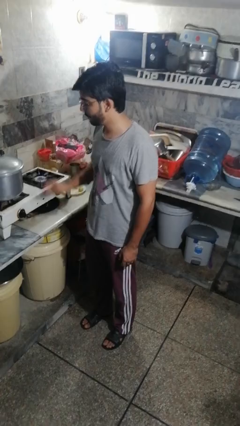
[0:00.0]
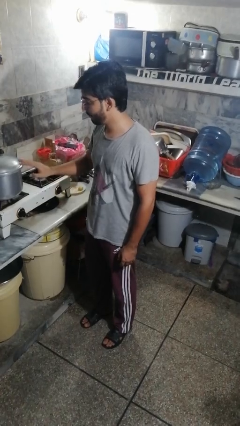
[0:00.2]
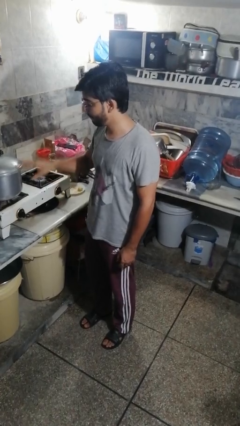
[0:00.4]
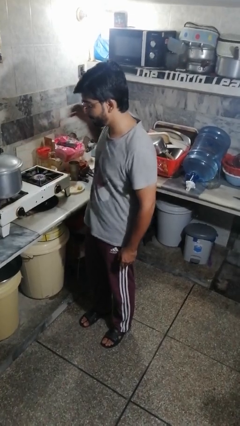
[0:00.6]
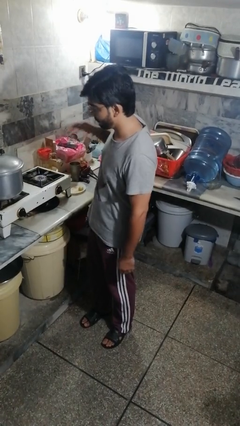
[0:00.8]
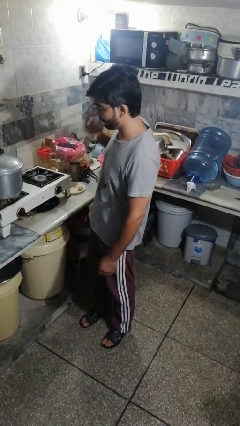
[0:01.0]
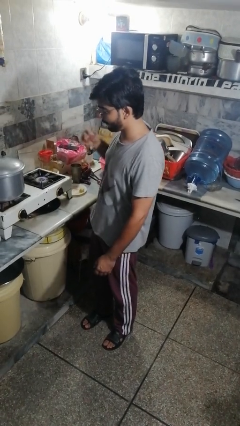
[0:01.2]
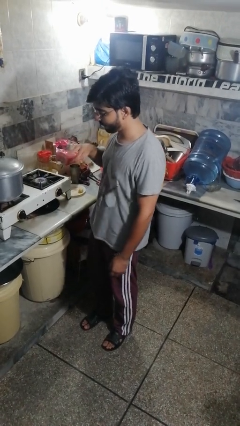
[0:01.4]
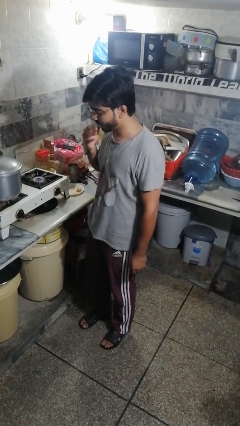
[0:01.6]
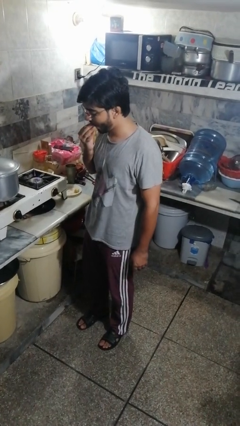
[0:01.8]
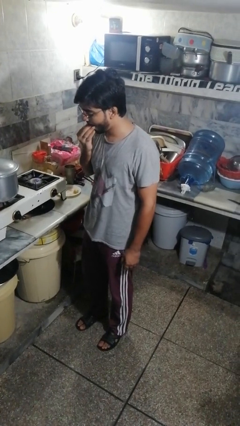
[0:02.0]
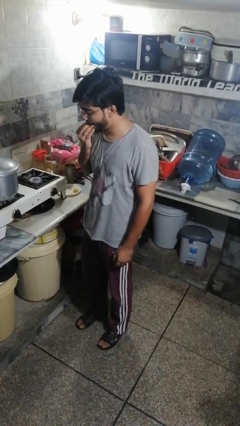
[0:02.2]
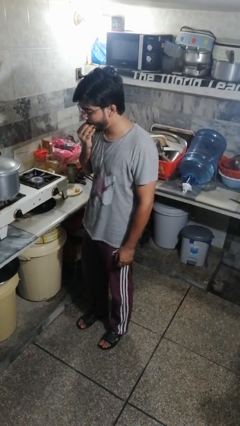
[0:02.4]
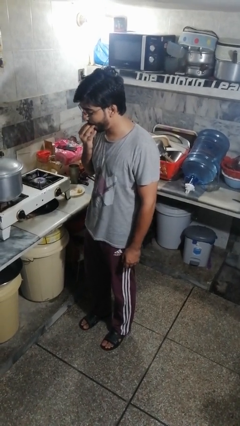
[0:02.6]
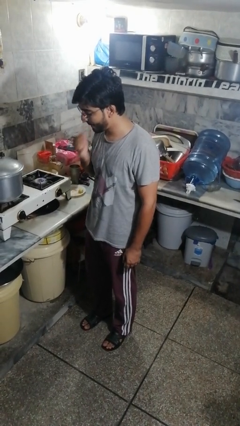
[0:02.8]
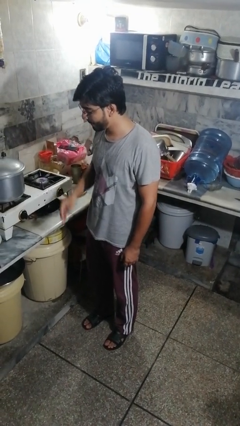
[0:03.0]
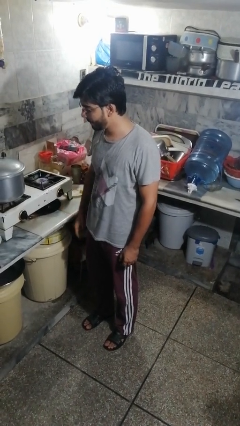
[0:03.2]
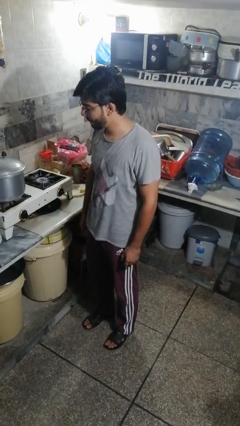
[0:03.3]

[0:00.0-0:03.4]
person burns hand

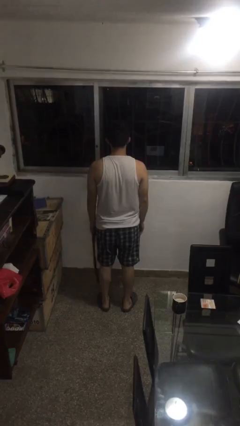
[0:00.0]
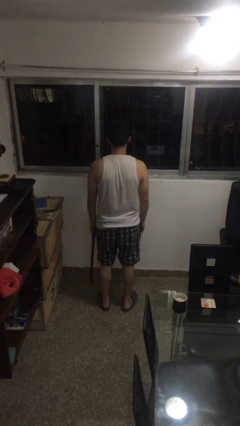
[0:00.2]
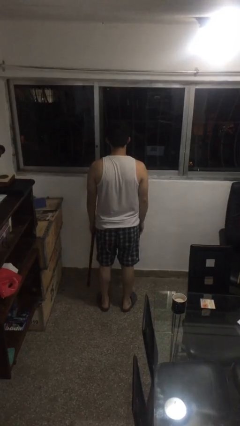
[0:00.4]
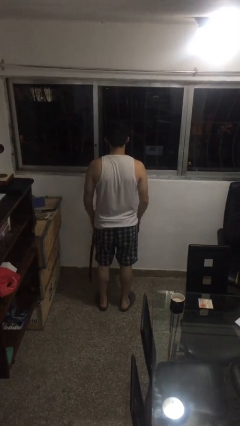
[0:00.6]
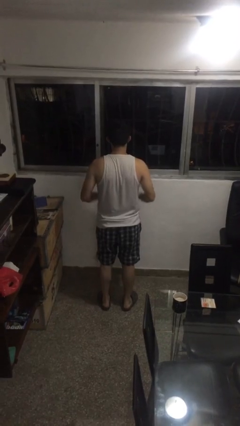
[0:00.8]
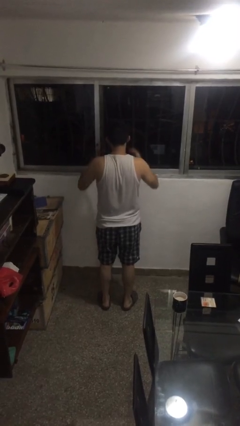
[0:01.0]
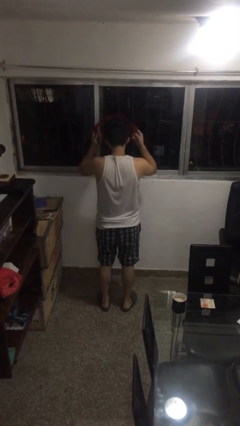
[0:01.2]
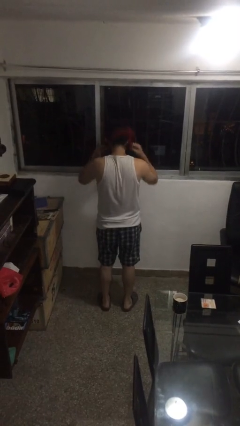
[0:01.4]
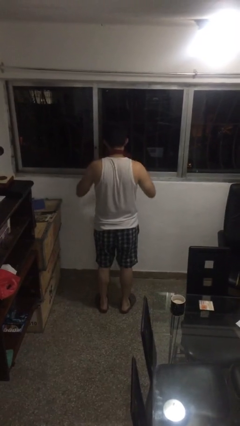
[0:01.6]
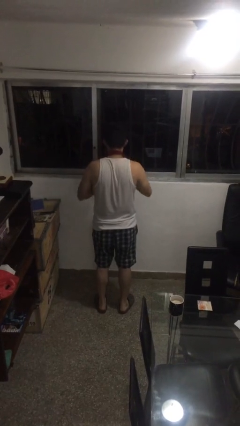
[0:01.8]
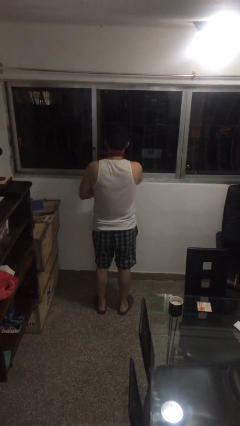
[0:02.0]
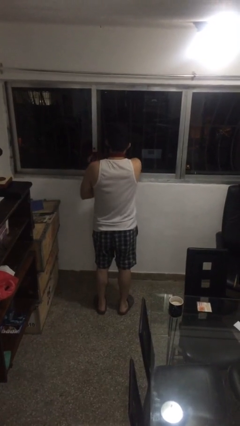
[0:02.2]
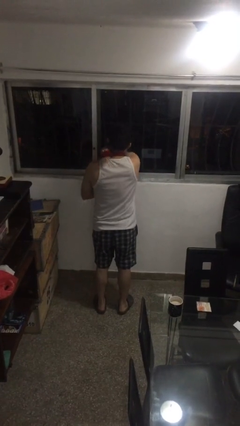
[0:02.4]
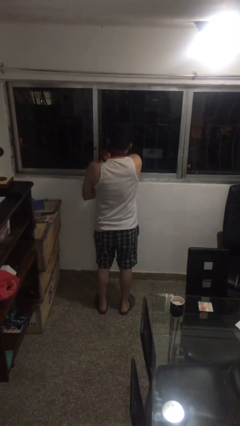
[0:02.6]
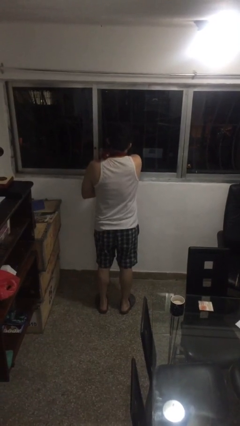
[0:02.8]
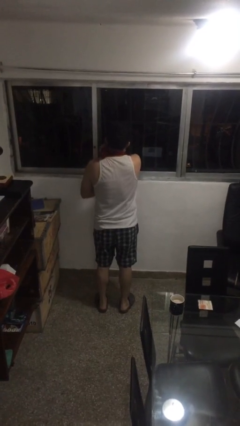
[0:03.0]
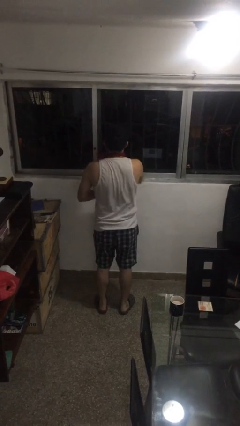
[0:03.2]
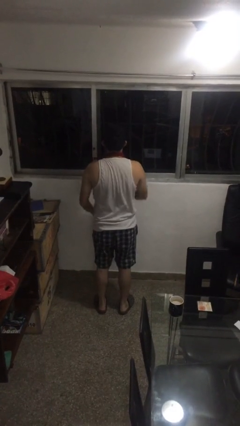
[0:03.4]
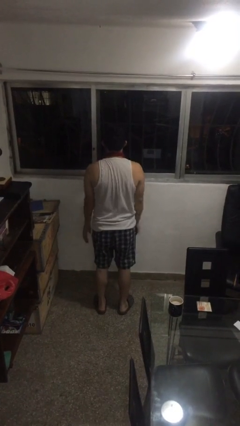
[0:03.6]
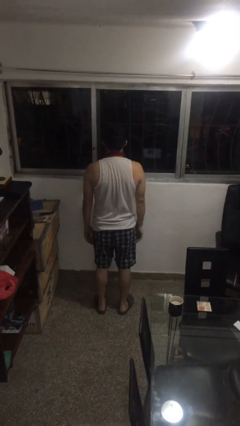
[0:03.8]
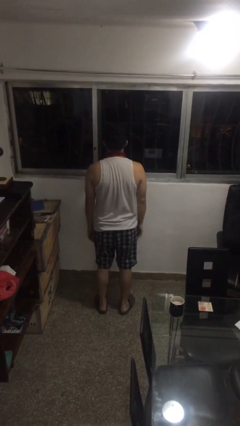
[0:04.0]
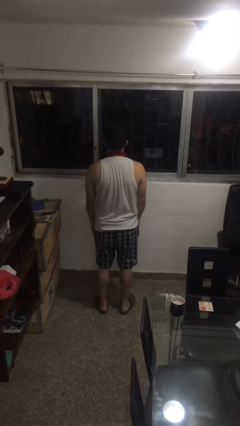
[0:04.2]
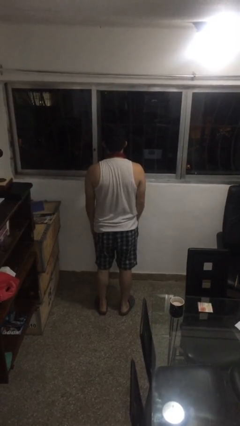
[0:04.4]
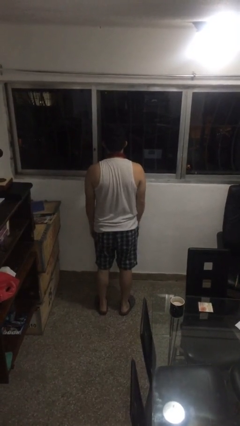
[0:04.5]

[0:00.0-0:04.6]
person puts on scarf

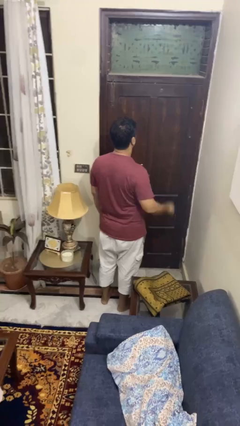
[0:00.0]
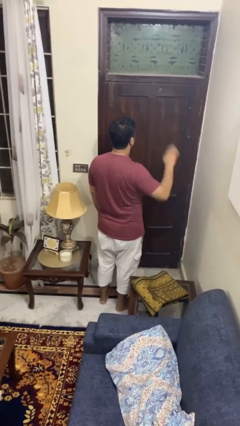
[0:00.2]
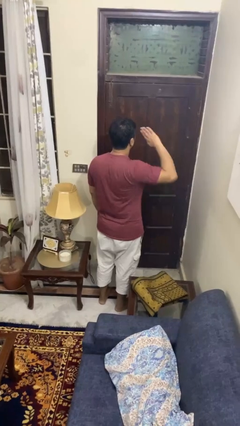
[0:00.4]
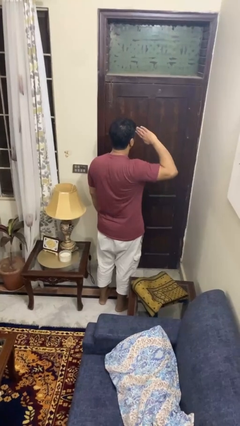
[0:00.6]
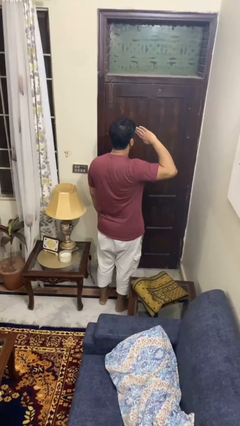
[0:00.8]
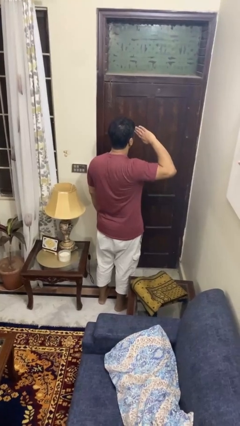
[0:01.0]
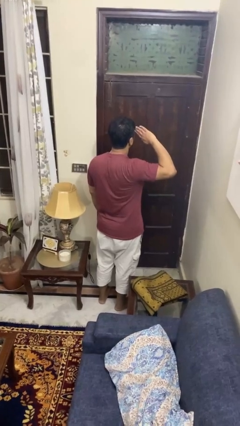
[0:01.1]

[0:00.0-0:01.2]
person salutes

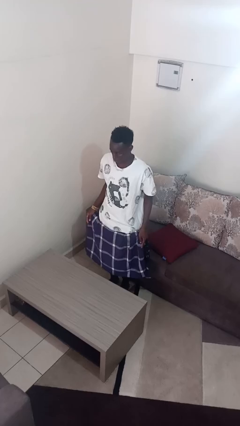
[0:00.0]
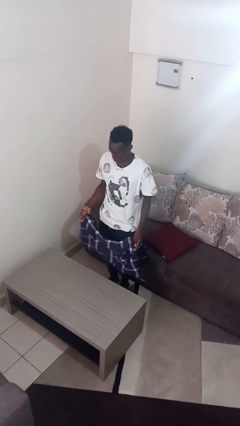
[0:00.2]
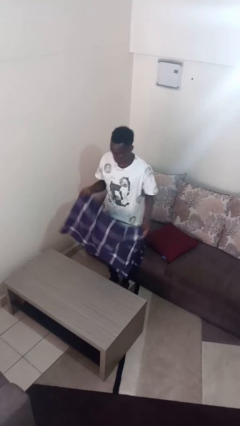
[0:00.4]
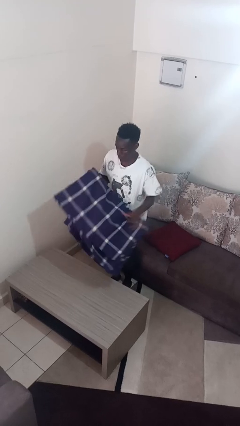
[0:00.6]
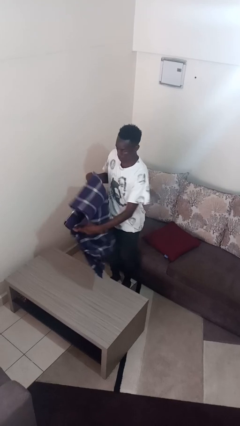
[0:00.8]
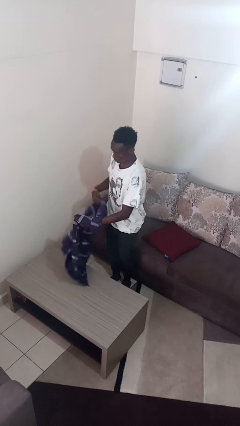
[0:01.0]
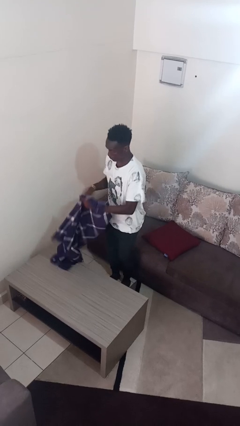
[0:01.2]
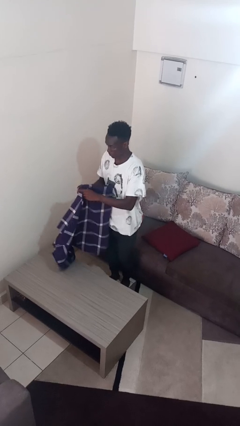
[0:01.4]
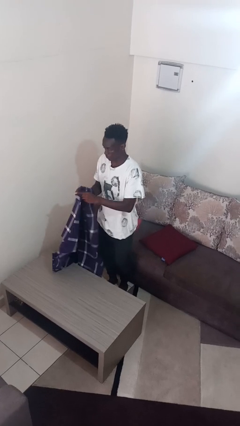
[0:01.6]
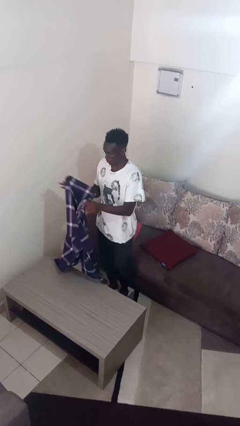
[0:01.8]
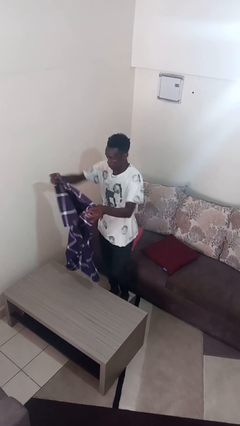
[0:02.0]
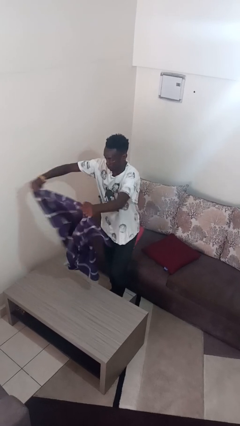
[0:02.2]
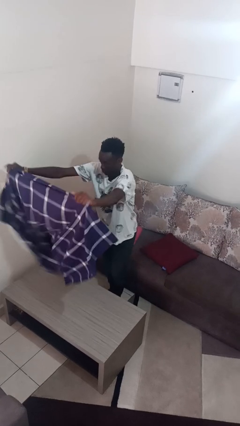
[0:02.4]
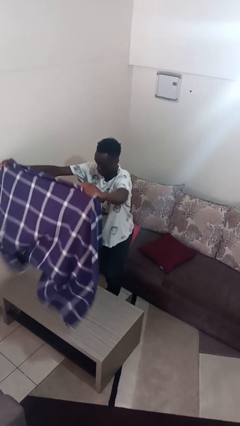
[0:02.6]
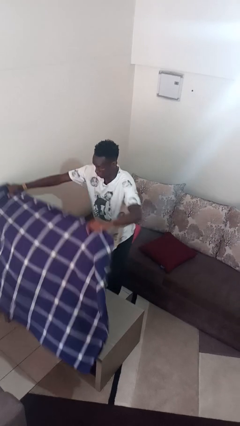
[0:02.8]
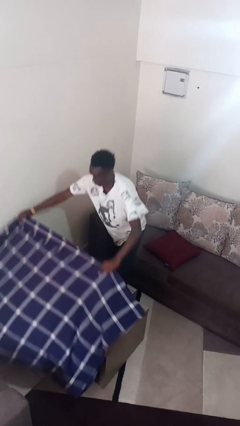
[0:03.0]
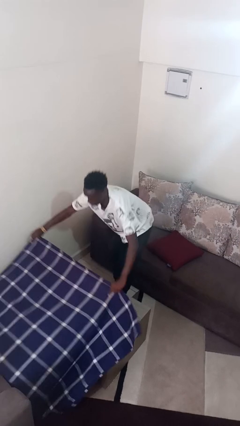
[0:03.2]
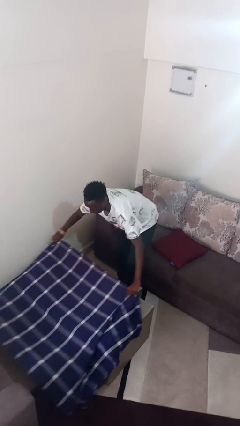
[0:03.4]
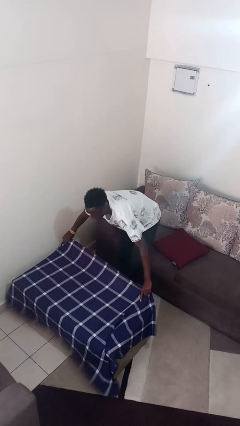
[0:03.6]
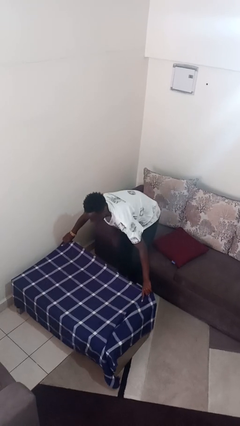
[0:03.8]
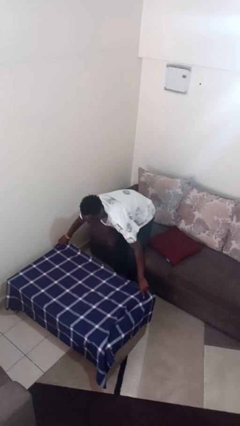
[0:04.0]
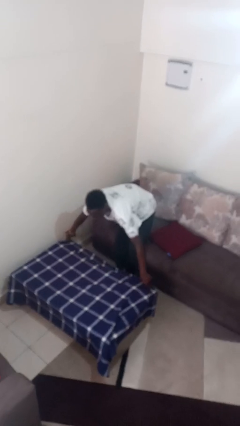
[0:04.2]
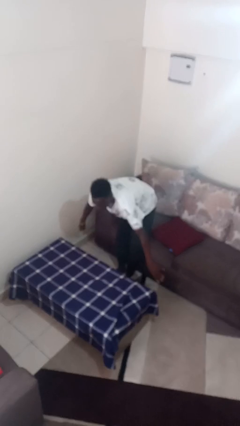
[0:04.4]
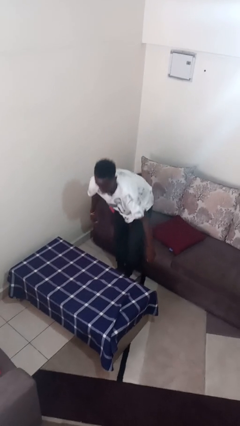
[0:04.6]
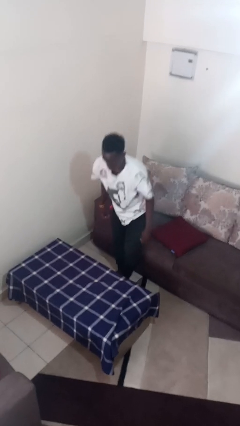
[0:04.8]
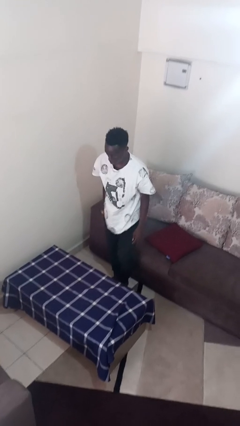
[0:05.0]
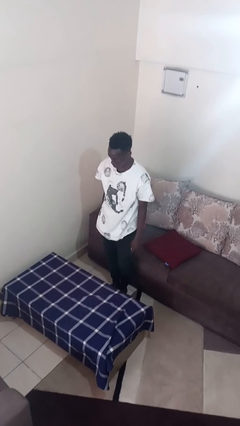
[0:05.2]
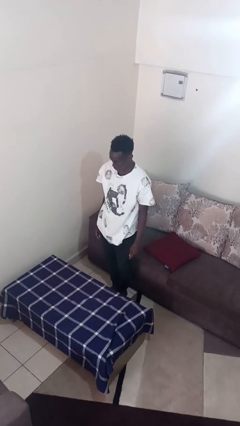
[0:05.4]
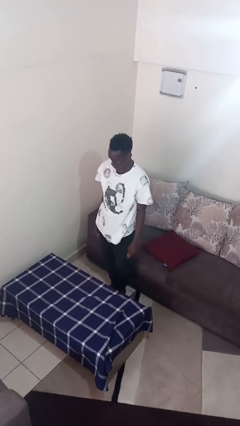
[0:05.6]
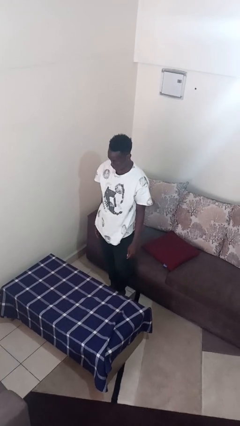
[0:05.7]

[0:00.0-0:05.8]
person spreads tablecloth

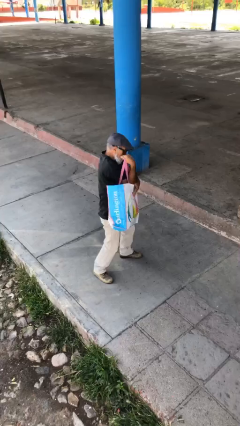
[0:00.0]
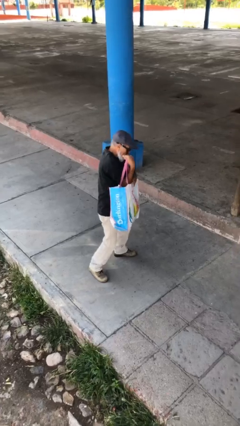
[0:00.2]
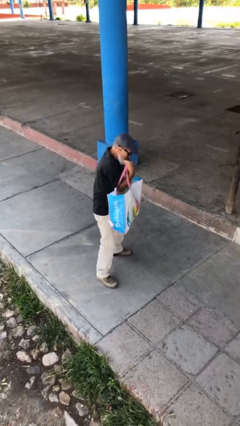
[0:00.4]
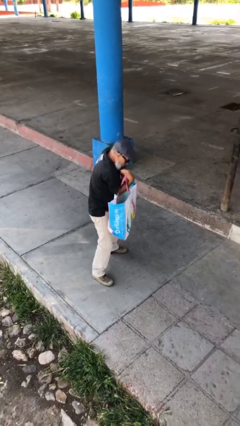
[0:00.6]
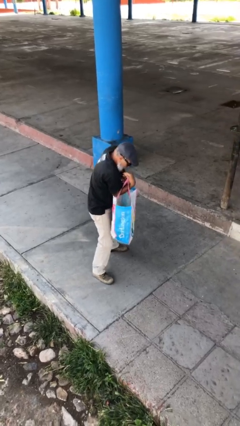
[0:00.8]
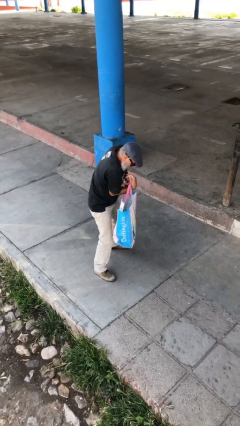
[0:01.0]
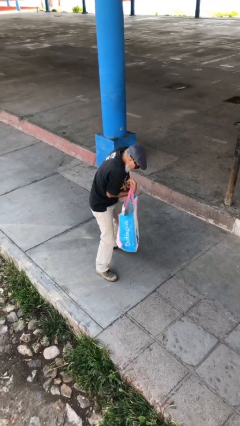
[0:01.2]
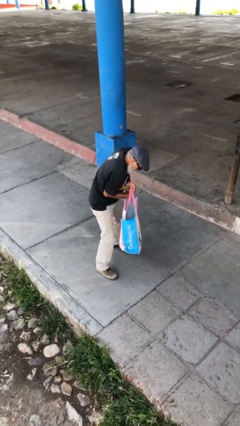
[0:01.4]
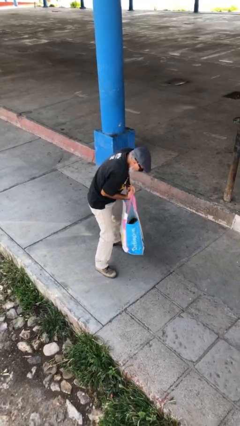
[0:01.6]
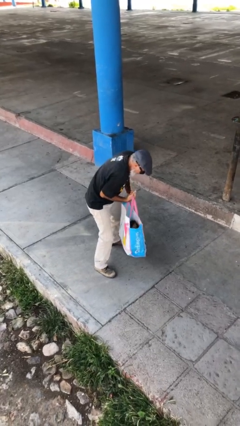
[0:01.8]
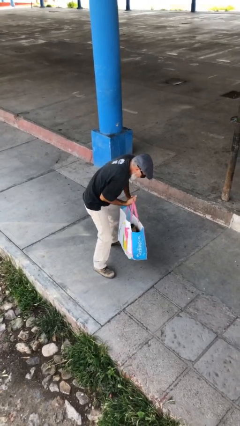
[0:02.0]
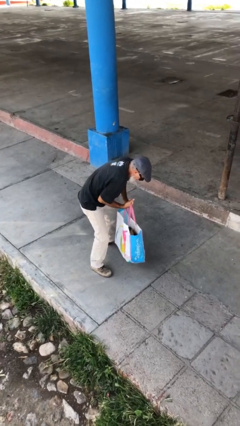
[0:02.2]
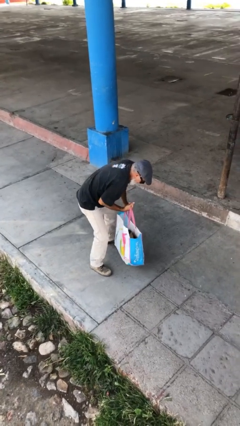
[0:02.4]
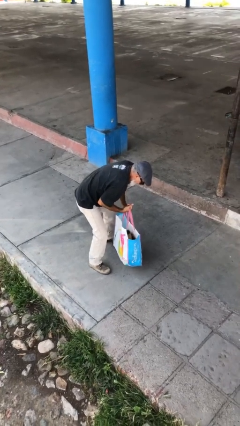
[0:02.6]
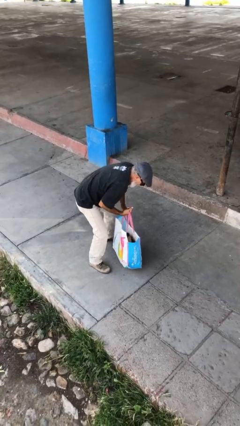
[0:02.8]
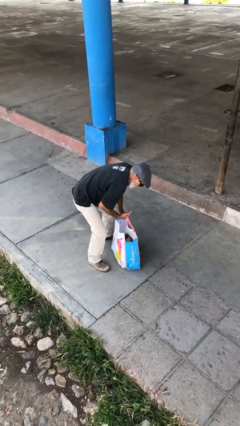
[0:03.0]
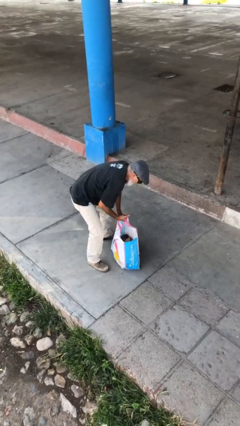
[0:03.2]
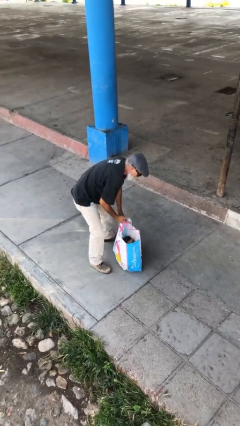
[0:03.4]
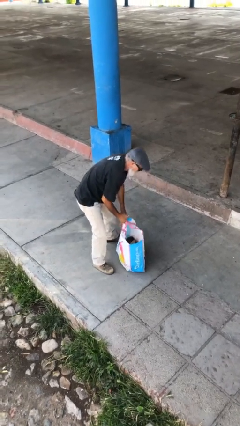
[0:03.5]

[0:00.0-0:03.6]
person puts down object on floor
